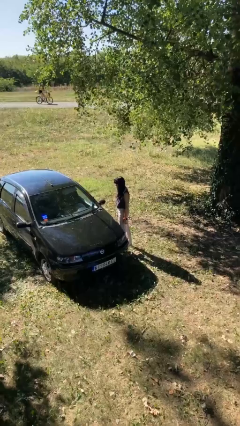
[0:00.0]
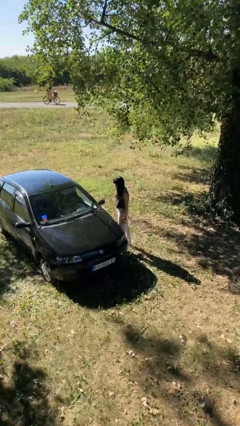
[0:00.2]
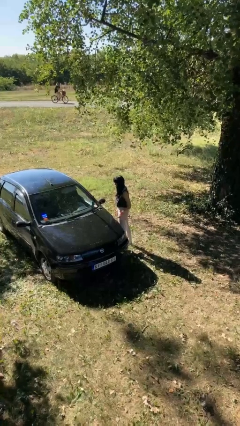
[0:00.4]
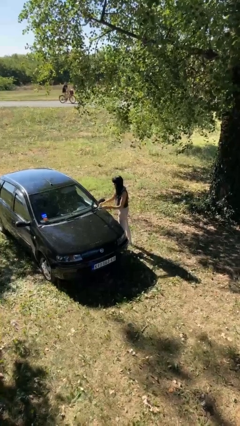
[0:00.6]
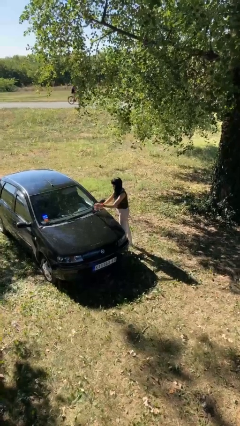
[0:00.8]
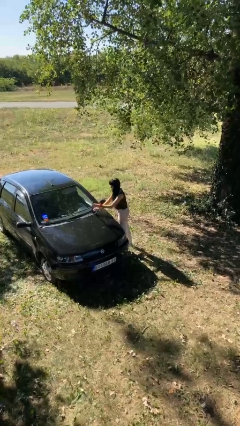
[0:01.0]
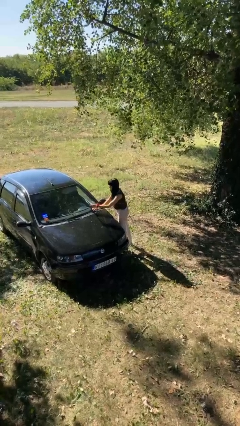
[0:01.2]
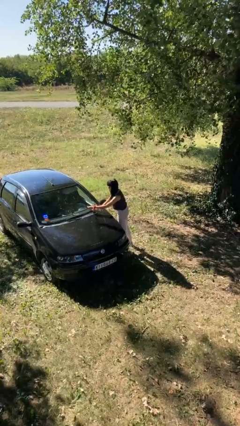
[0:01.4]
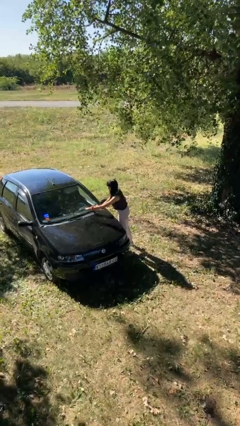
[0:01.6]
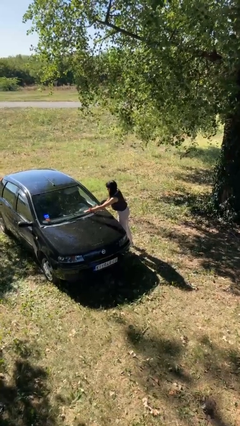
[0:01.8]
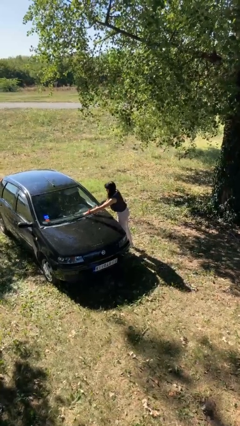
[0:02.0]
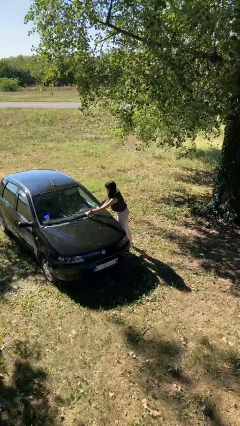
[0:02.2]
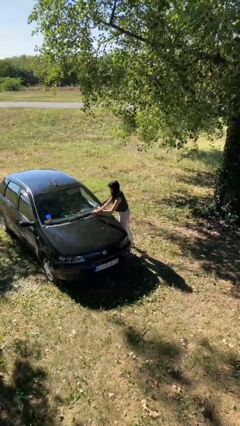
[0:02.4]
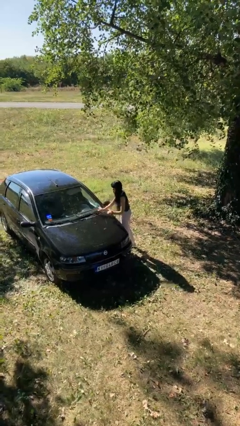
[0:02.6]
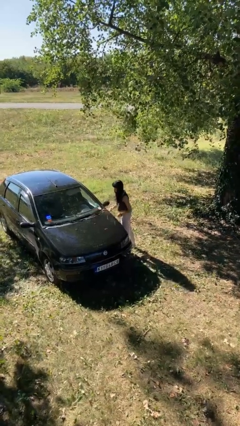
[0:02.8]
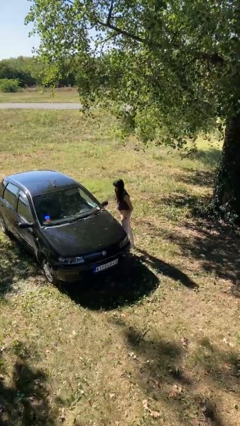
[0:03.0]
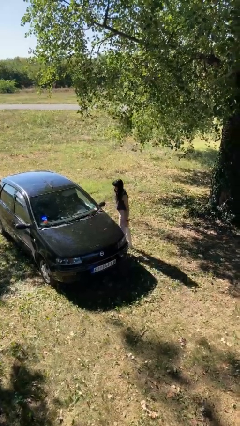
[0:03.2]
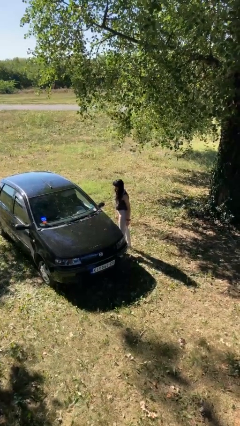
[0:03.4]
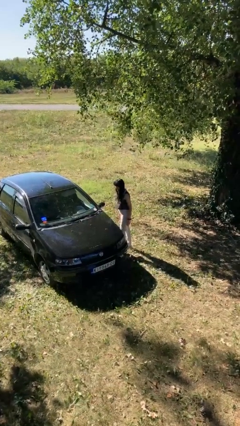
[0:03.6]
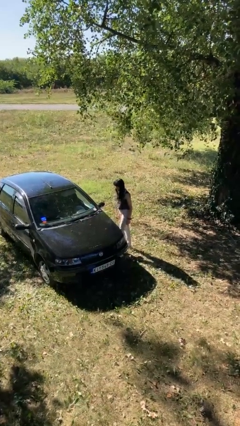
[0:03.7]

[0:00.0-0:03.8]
person flips down car wipers

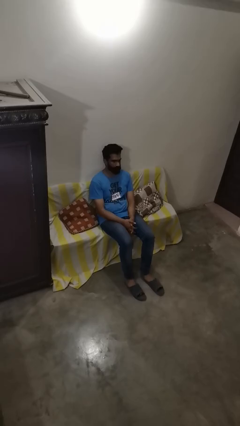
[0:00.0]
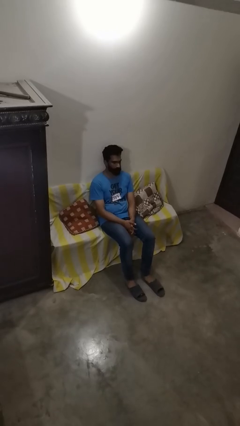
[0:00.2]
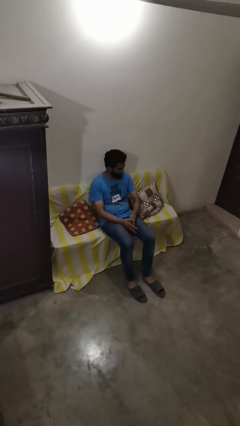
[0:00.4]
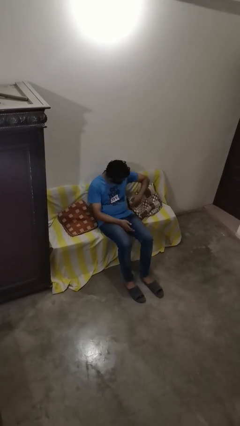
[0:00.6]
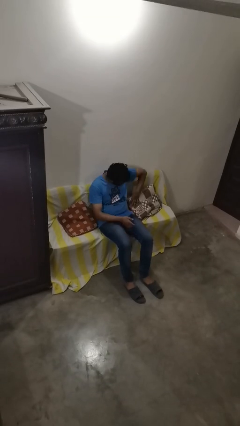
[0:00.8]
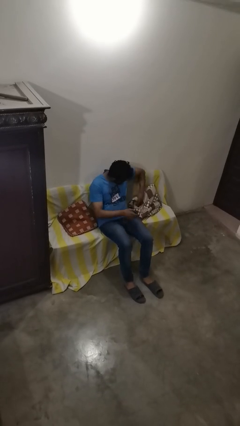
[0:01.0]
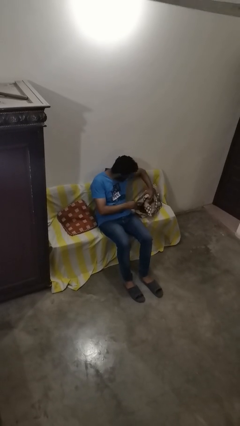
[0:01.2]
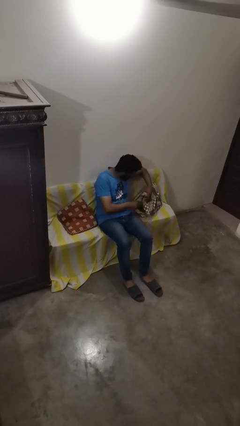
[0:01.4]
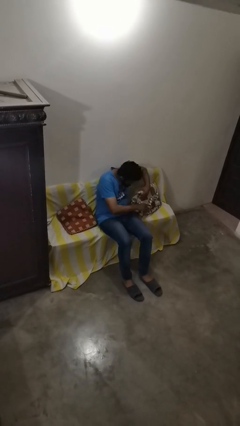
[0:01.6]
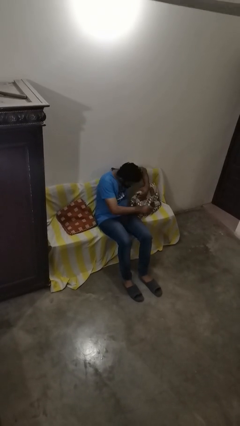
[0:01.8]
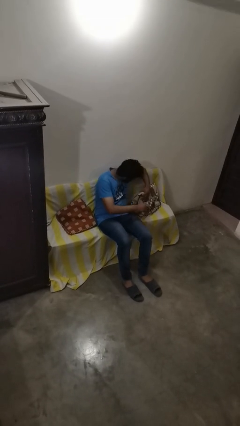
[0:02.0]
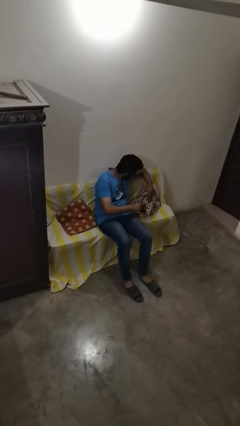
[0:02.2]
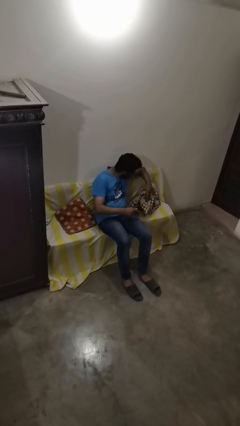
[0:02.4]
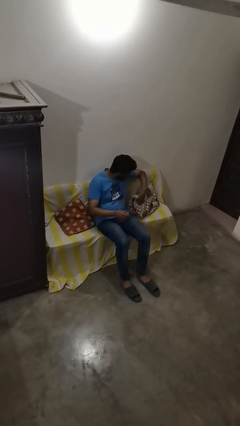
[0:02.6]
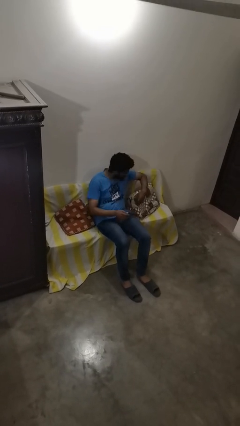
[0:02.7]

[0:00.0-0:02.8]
person searches in couch

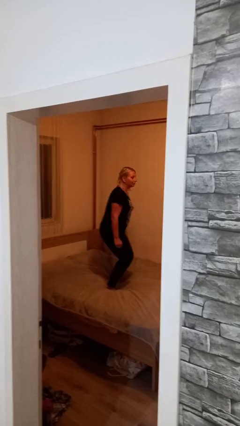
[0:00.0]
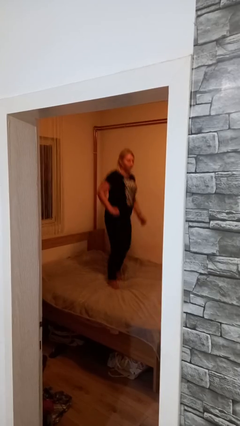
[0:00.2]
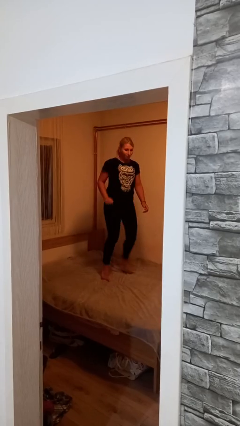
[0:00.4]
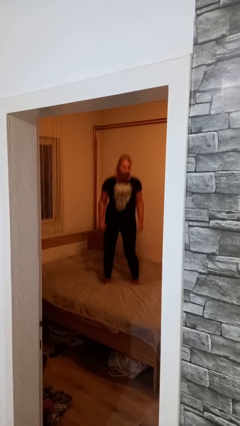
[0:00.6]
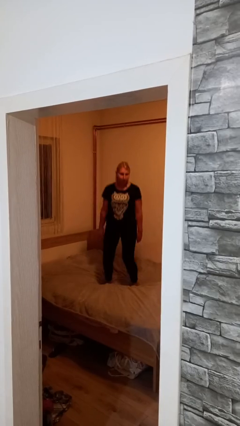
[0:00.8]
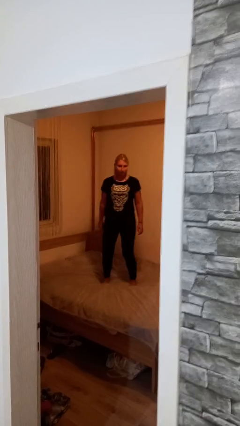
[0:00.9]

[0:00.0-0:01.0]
person jumps on bed

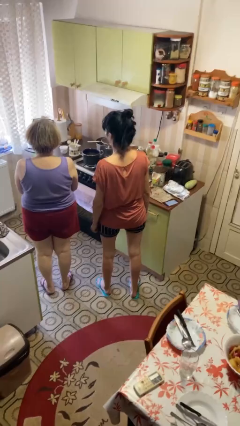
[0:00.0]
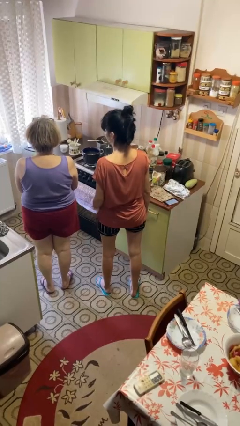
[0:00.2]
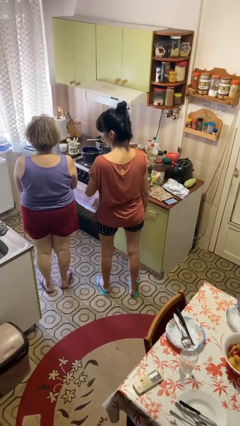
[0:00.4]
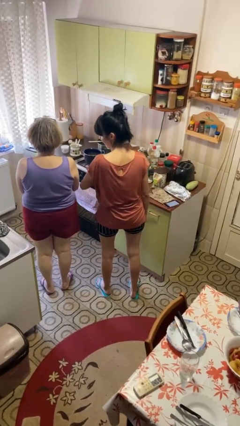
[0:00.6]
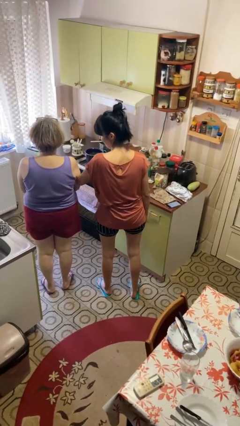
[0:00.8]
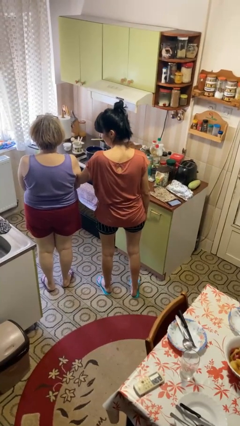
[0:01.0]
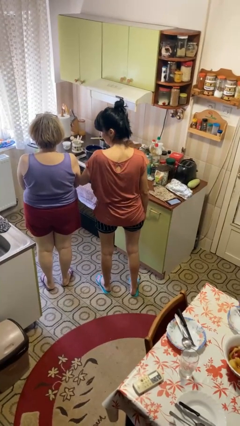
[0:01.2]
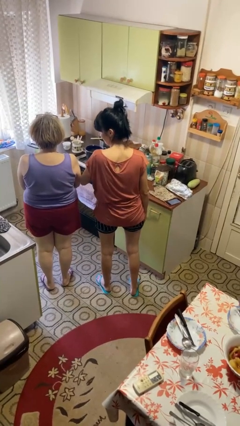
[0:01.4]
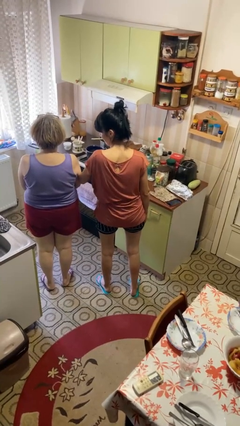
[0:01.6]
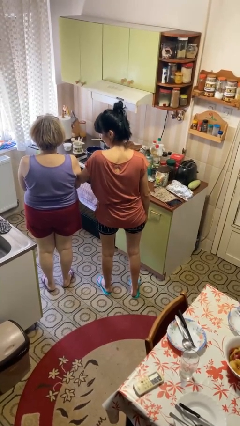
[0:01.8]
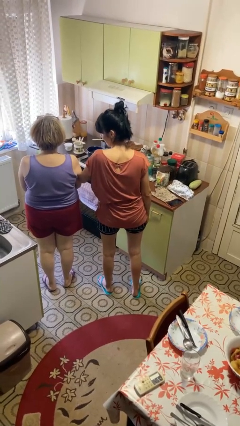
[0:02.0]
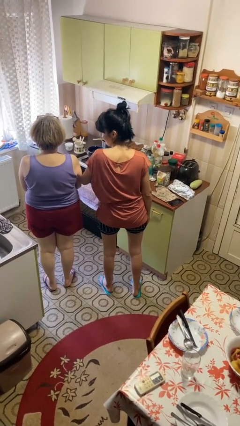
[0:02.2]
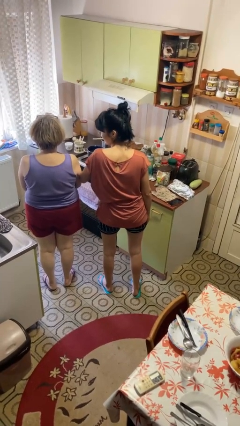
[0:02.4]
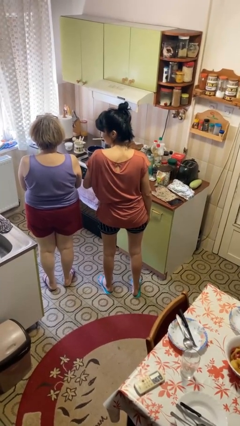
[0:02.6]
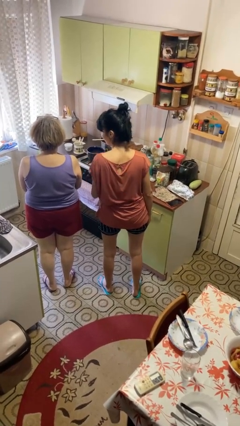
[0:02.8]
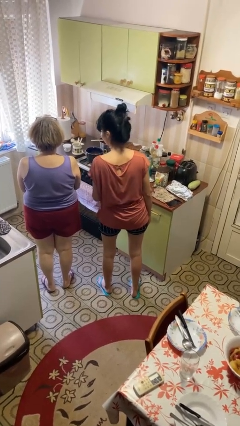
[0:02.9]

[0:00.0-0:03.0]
person nudges person with elbow

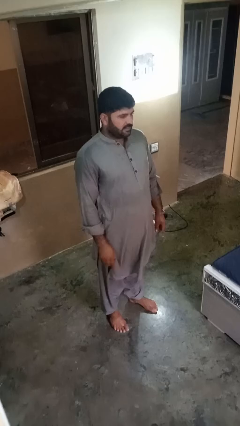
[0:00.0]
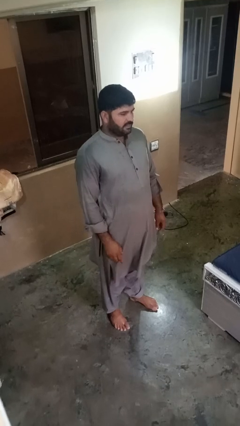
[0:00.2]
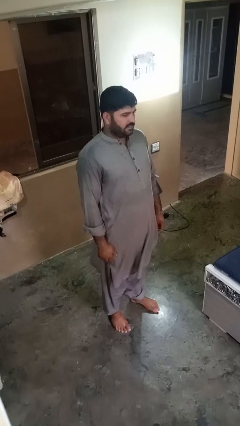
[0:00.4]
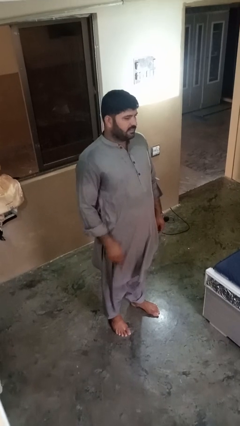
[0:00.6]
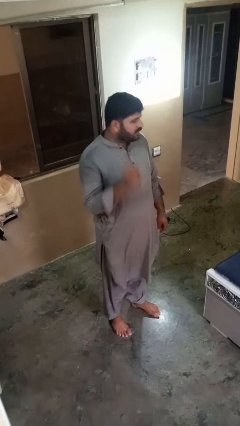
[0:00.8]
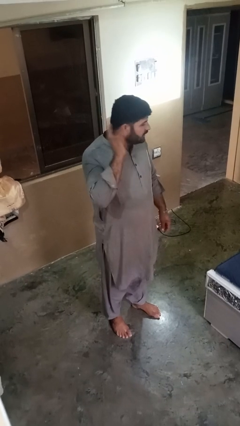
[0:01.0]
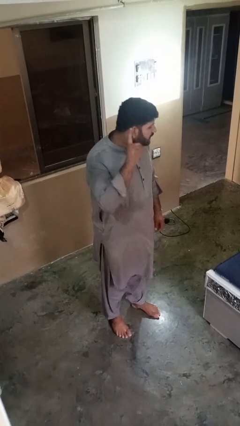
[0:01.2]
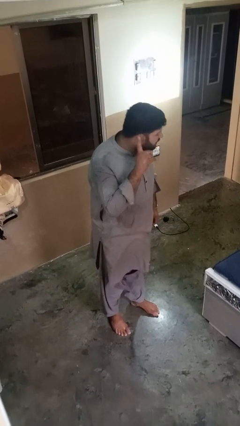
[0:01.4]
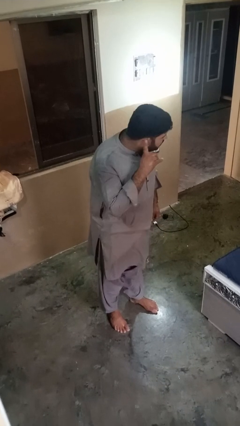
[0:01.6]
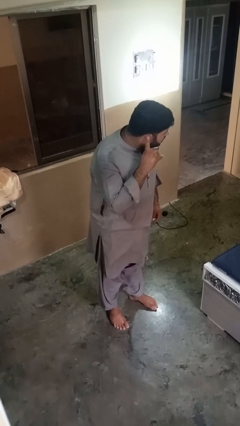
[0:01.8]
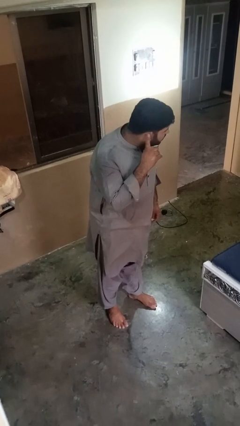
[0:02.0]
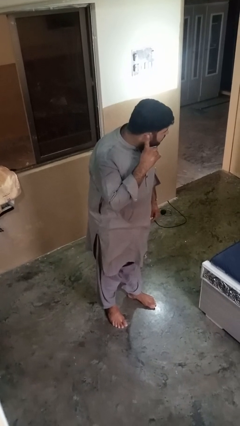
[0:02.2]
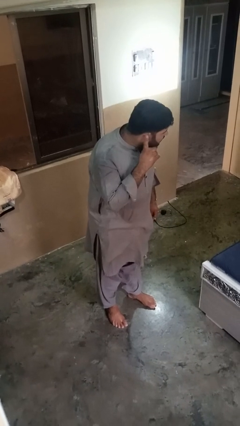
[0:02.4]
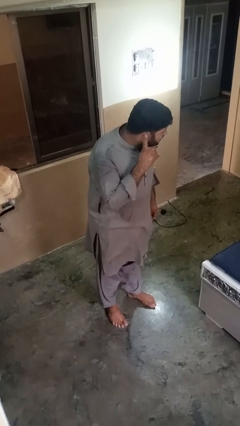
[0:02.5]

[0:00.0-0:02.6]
person gestures listen closely

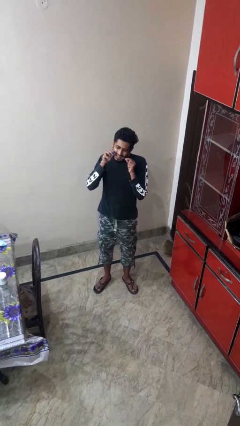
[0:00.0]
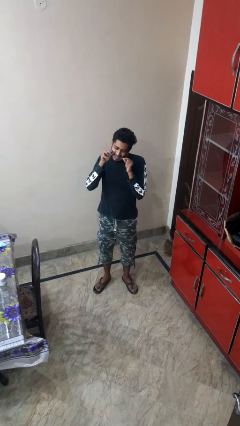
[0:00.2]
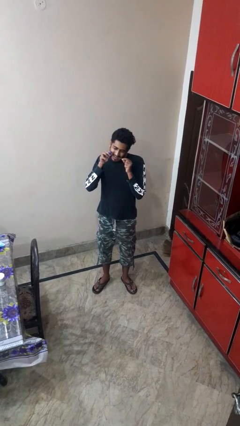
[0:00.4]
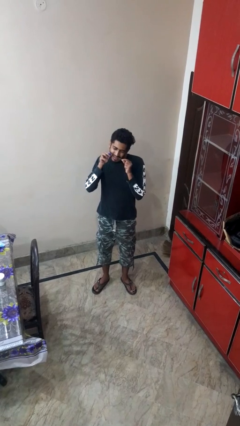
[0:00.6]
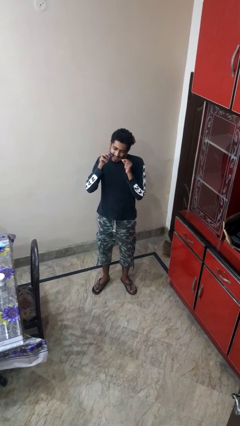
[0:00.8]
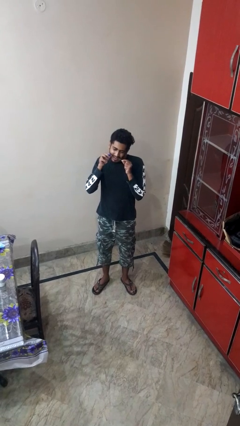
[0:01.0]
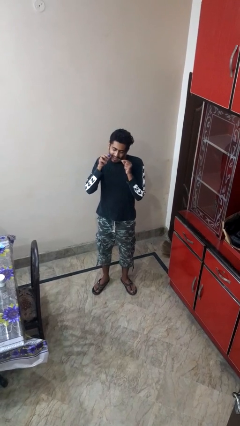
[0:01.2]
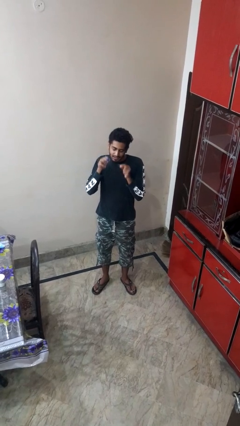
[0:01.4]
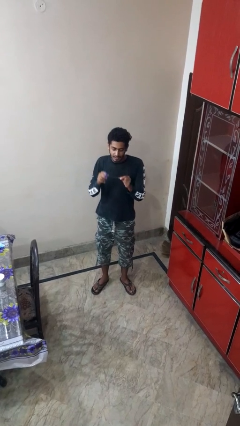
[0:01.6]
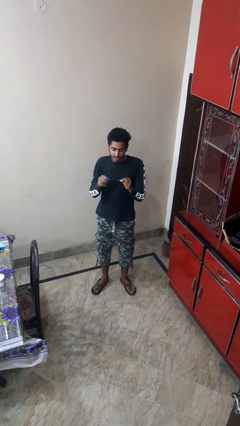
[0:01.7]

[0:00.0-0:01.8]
person flosses

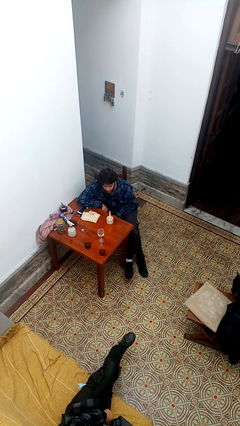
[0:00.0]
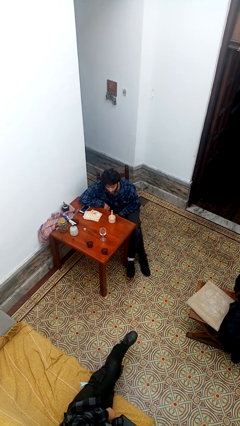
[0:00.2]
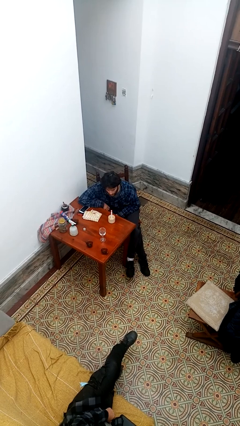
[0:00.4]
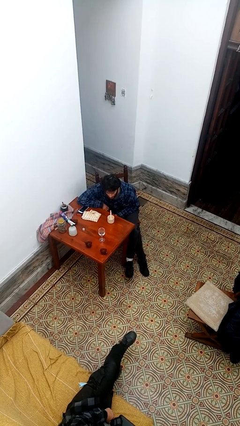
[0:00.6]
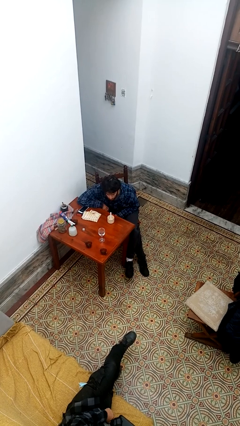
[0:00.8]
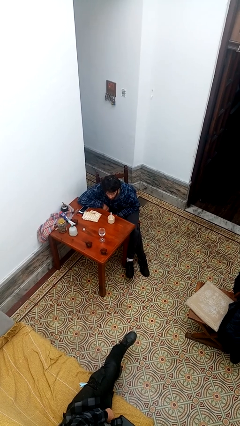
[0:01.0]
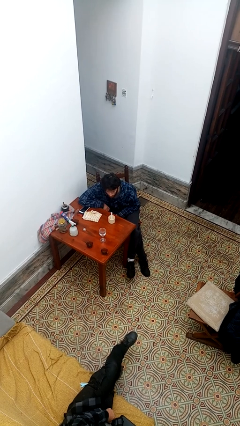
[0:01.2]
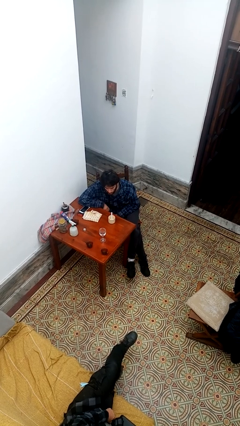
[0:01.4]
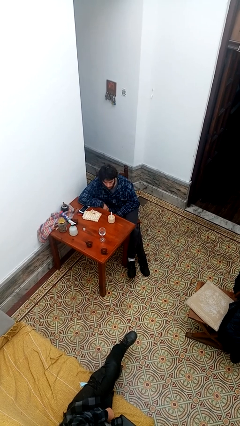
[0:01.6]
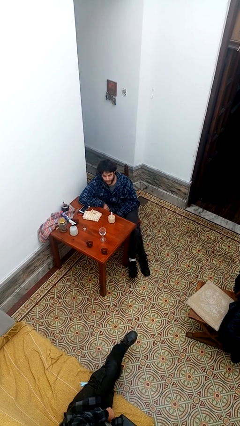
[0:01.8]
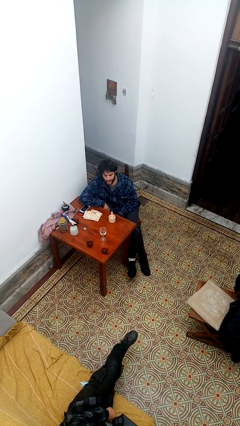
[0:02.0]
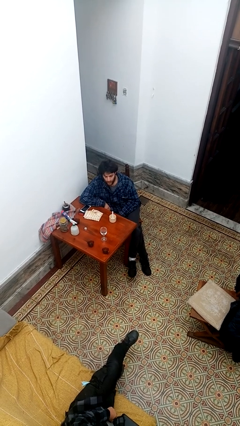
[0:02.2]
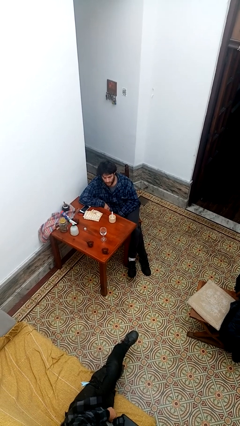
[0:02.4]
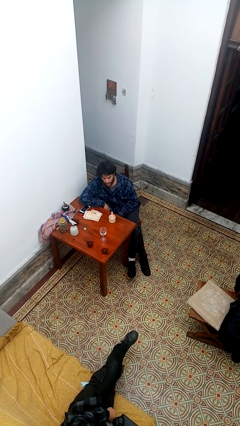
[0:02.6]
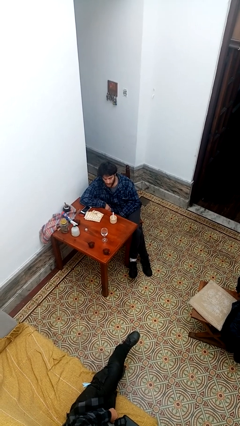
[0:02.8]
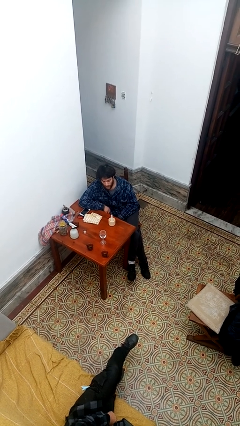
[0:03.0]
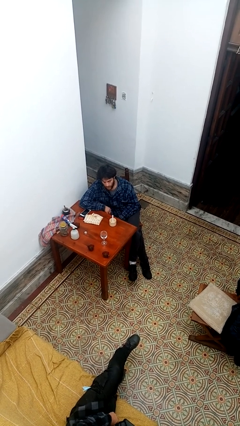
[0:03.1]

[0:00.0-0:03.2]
person extinguishes candle
